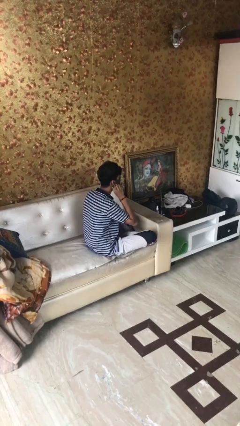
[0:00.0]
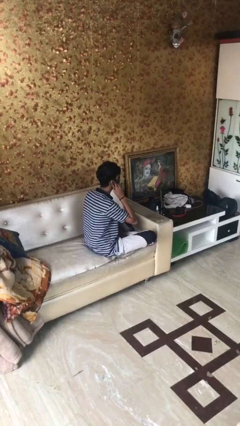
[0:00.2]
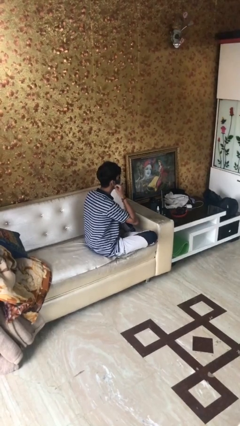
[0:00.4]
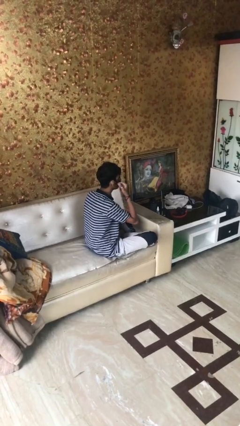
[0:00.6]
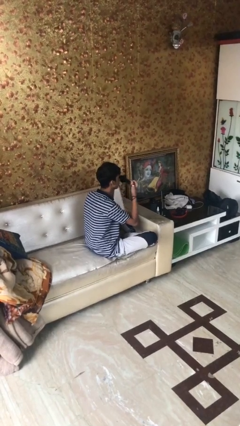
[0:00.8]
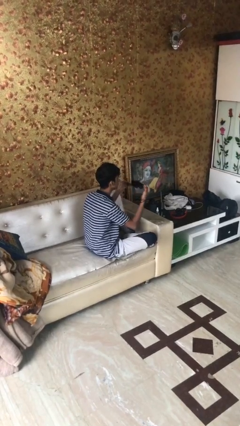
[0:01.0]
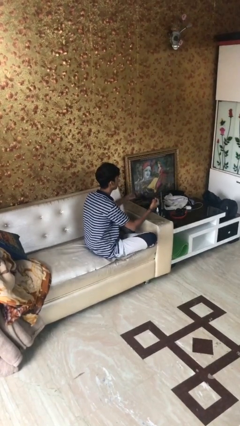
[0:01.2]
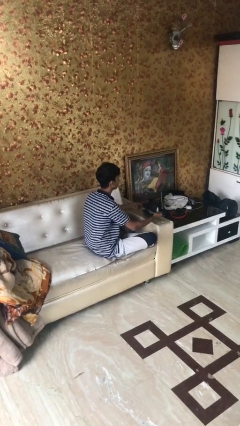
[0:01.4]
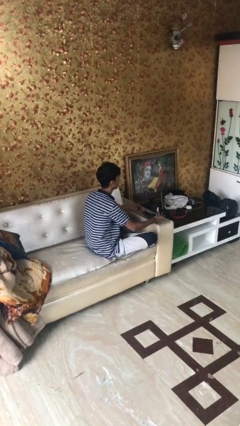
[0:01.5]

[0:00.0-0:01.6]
person takes off facemask

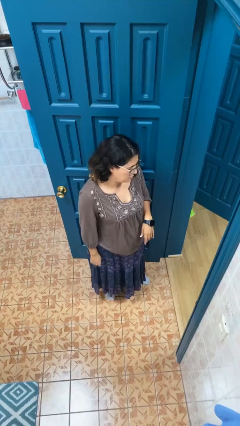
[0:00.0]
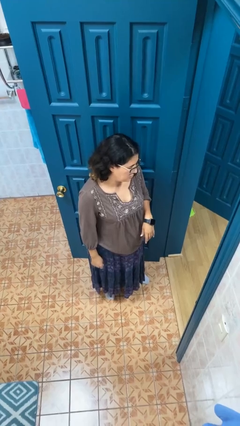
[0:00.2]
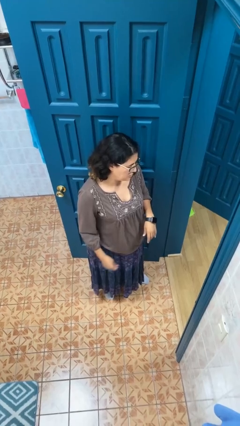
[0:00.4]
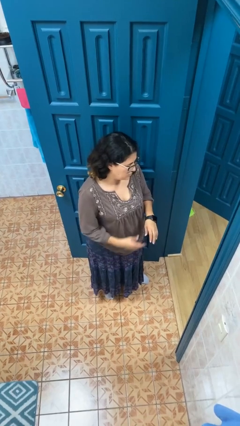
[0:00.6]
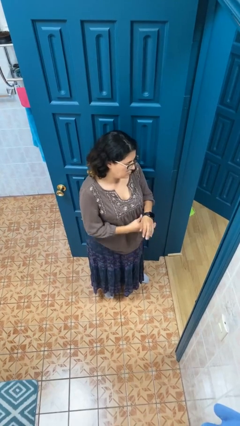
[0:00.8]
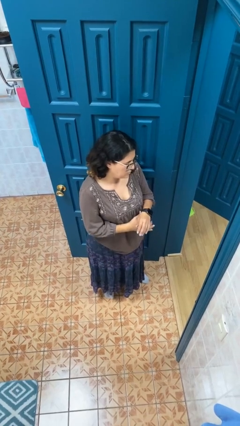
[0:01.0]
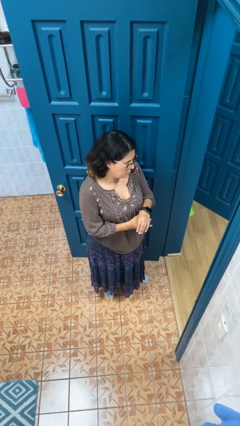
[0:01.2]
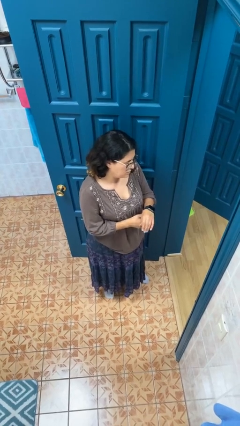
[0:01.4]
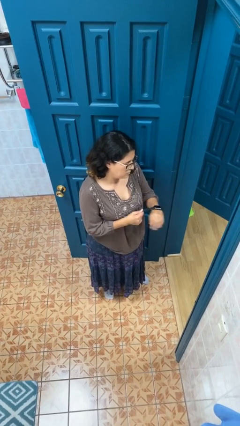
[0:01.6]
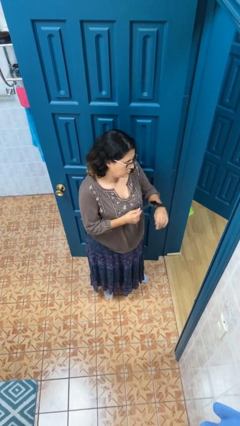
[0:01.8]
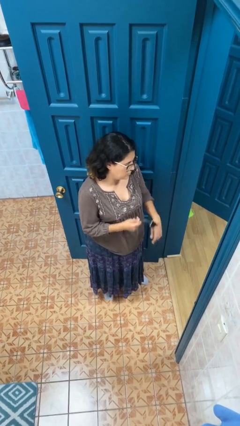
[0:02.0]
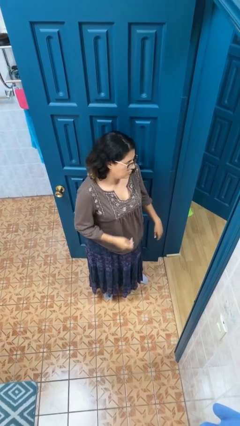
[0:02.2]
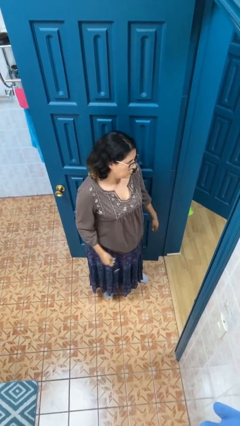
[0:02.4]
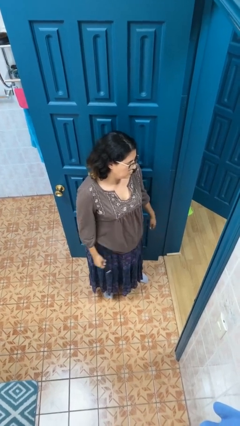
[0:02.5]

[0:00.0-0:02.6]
person takes off wristwatch

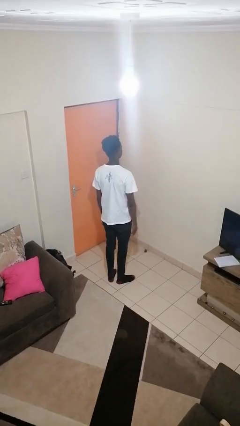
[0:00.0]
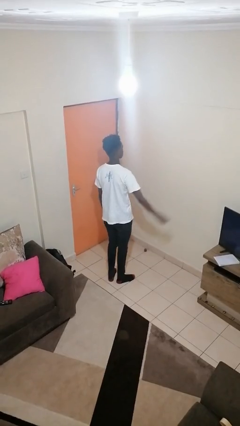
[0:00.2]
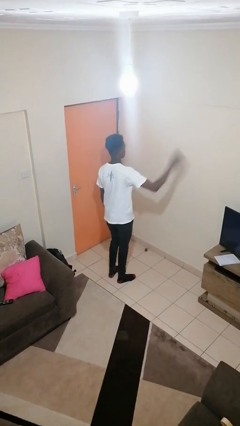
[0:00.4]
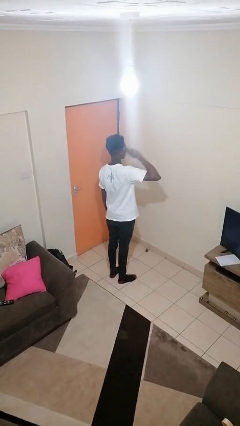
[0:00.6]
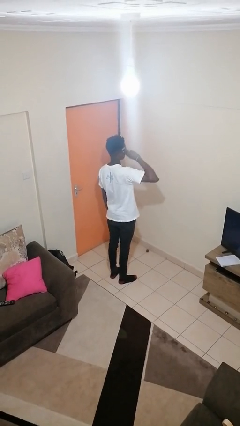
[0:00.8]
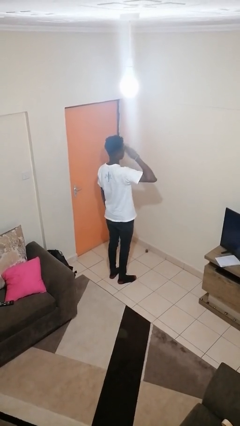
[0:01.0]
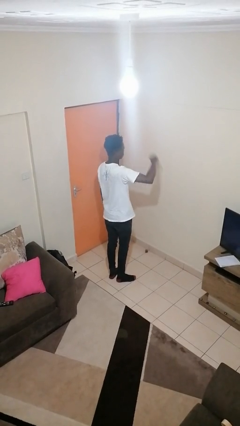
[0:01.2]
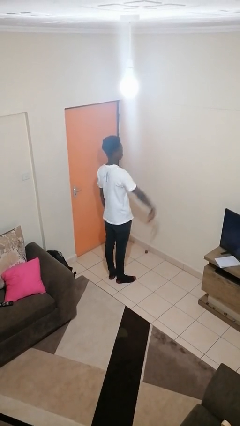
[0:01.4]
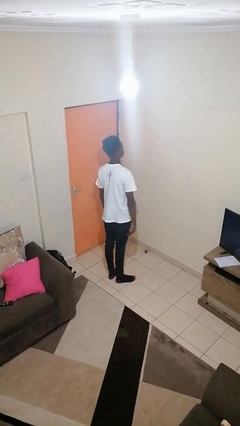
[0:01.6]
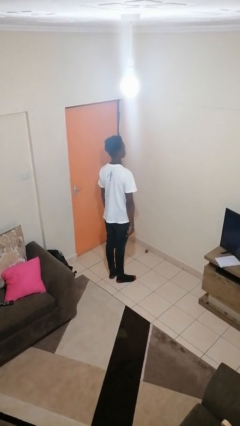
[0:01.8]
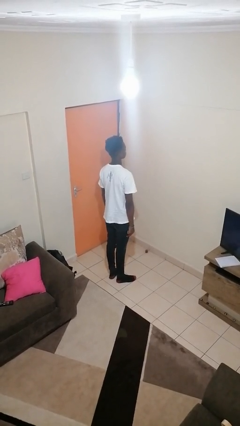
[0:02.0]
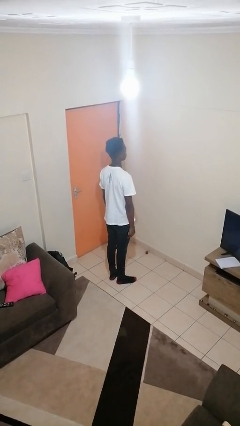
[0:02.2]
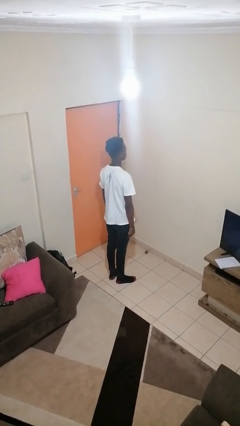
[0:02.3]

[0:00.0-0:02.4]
person salutes

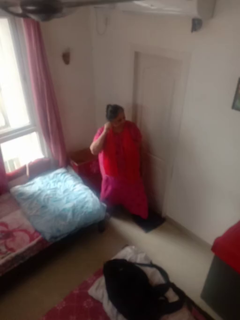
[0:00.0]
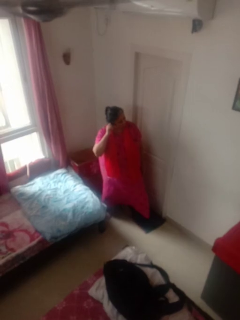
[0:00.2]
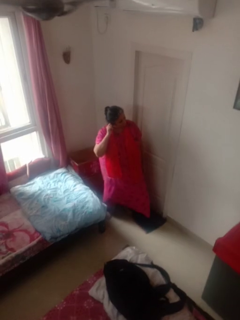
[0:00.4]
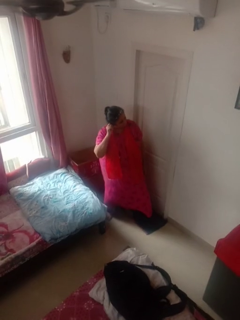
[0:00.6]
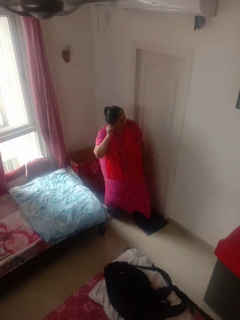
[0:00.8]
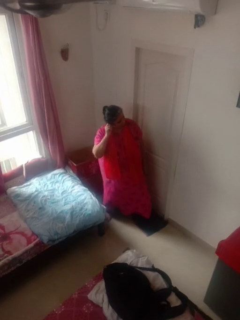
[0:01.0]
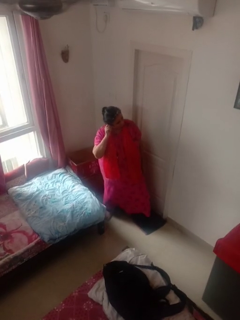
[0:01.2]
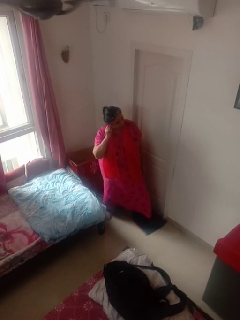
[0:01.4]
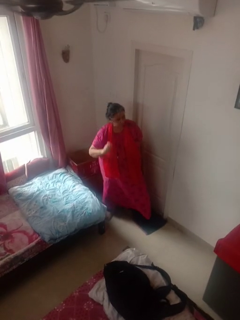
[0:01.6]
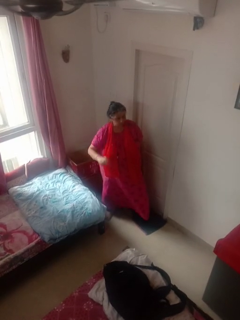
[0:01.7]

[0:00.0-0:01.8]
person touches earlobe

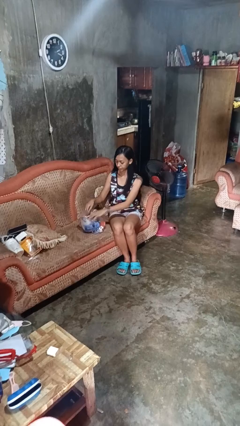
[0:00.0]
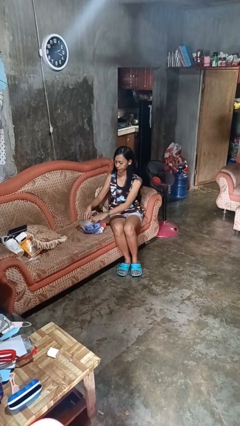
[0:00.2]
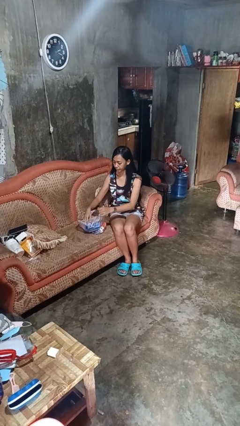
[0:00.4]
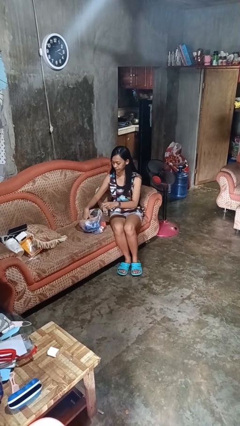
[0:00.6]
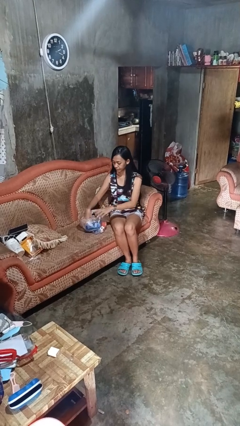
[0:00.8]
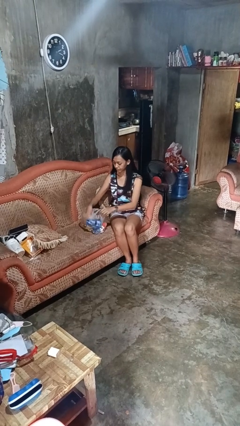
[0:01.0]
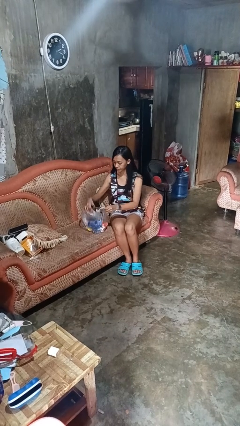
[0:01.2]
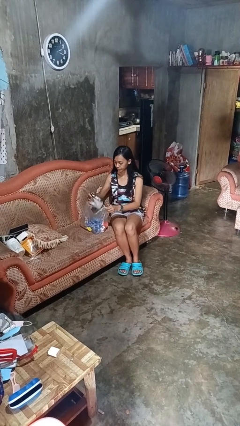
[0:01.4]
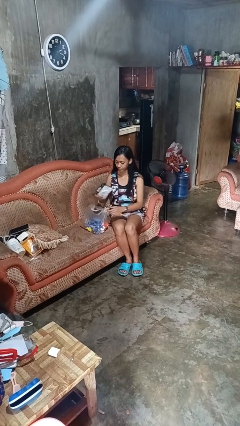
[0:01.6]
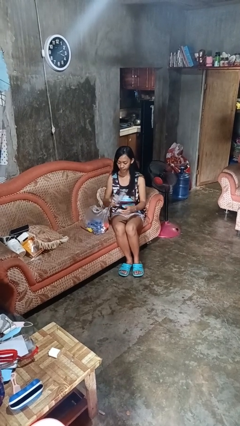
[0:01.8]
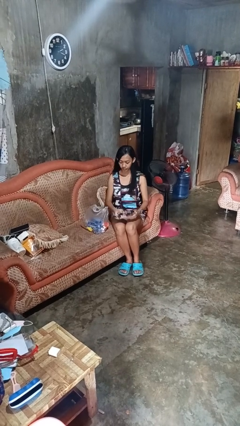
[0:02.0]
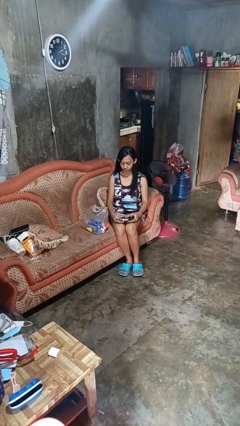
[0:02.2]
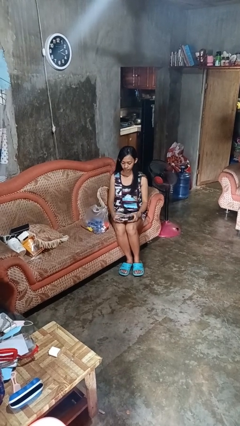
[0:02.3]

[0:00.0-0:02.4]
person takes object from bag

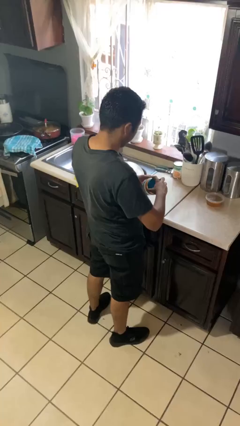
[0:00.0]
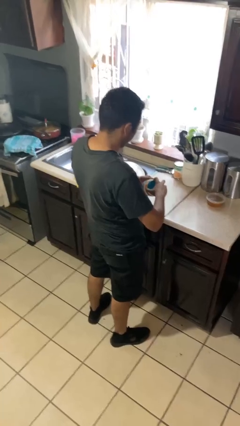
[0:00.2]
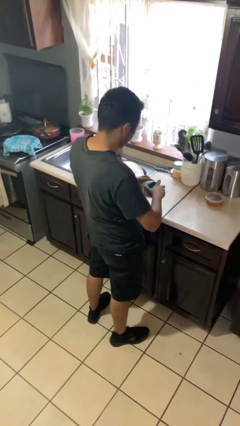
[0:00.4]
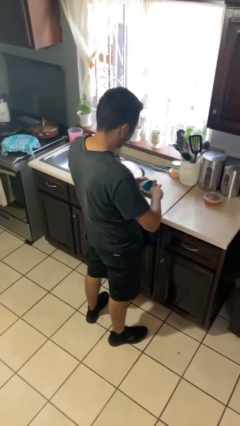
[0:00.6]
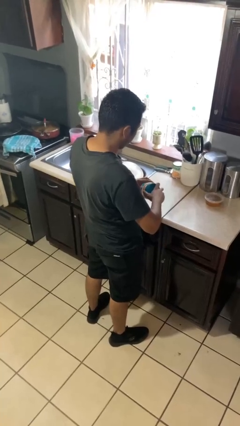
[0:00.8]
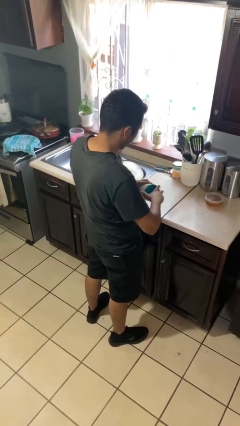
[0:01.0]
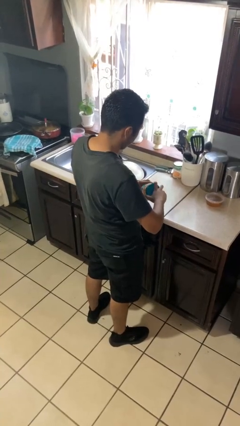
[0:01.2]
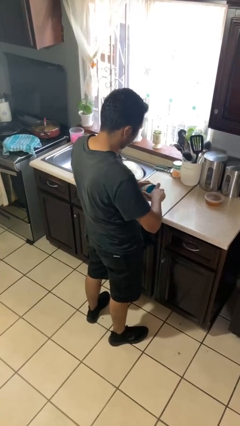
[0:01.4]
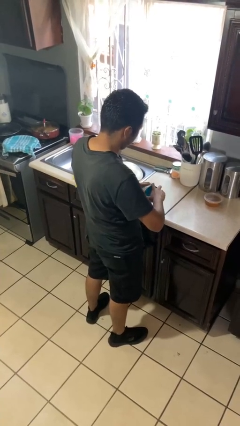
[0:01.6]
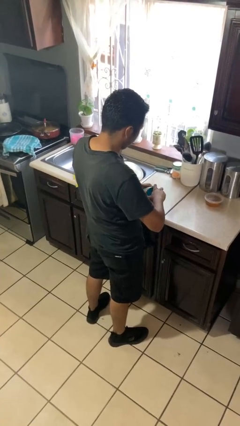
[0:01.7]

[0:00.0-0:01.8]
person closes jar

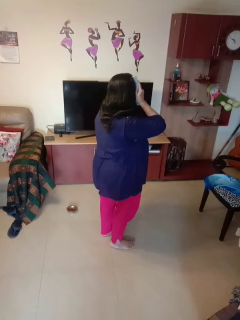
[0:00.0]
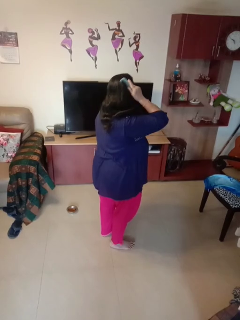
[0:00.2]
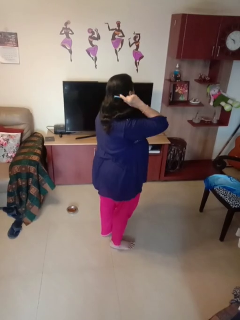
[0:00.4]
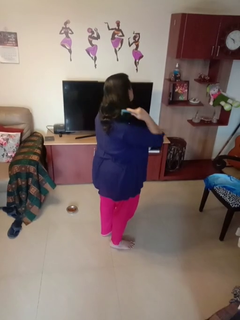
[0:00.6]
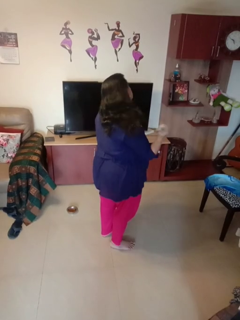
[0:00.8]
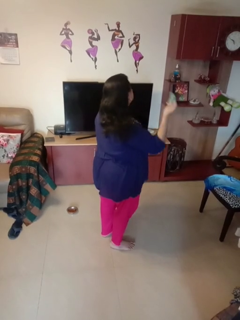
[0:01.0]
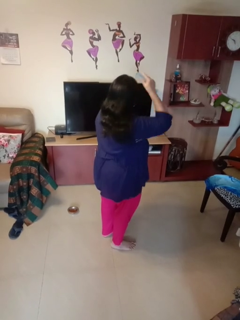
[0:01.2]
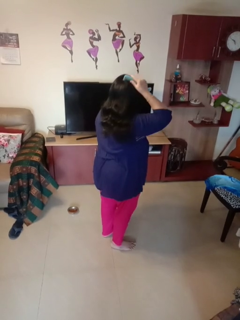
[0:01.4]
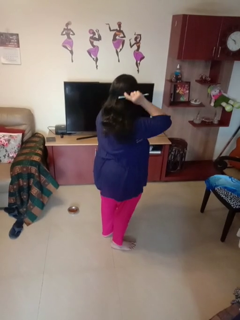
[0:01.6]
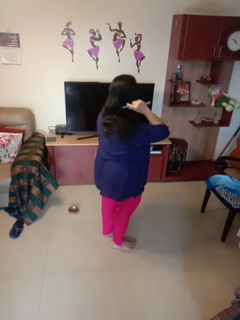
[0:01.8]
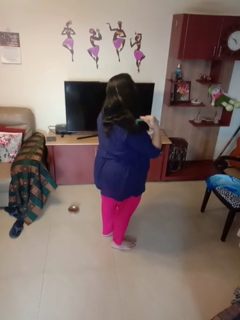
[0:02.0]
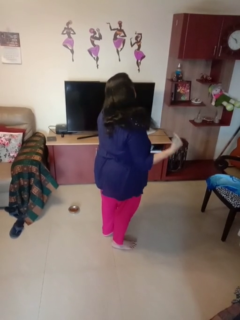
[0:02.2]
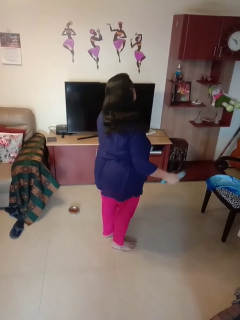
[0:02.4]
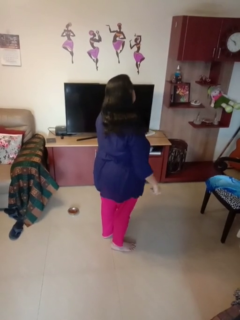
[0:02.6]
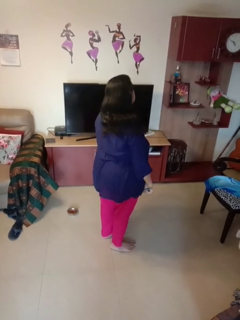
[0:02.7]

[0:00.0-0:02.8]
person brushes hair

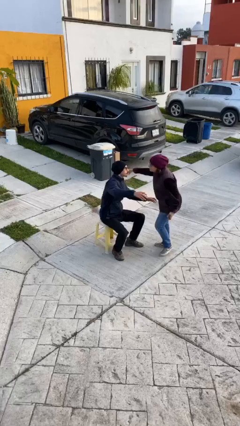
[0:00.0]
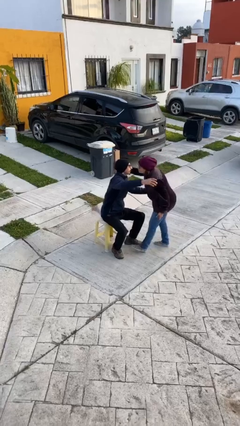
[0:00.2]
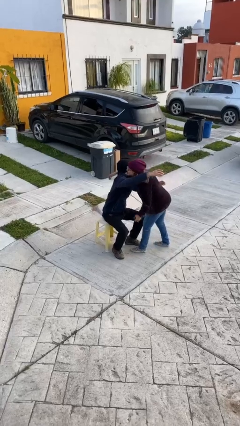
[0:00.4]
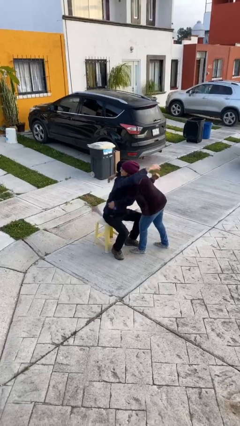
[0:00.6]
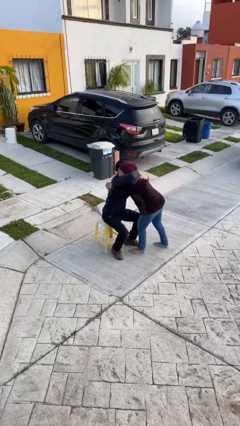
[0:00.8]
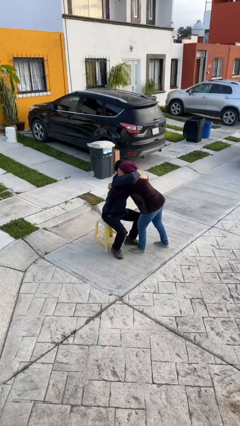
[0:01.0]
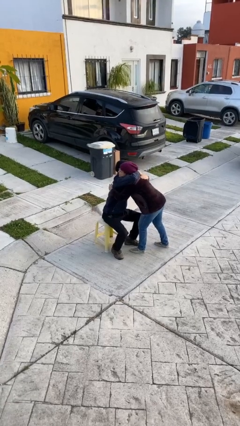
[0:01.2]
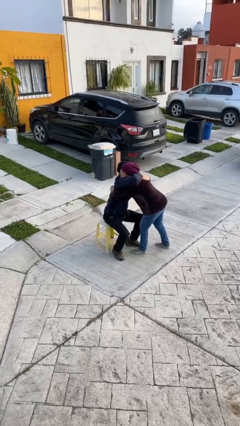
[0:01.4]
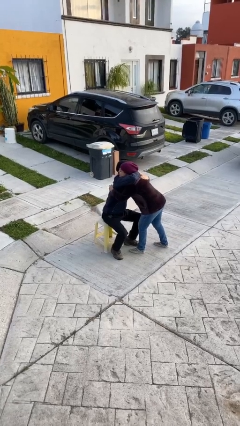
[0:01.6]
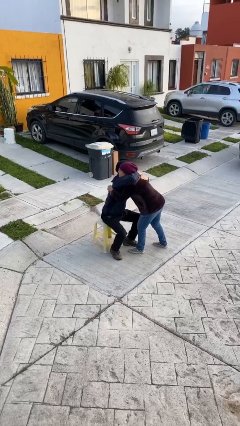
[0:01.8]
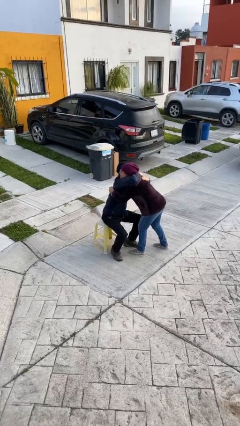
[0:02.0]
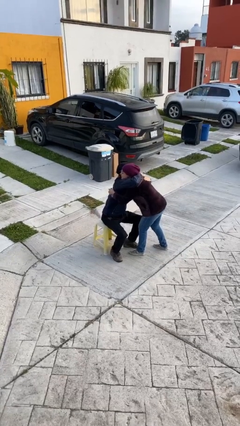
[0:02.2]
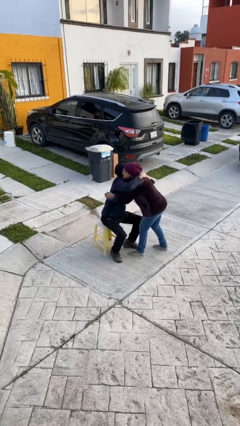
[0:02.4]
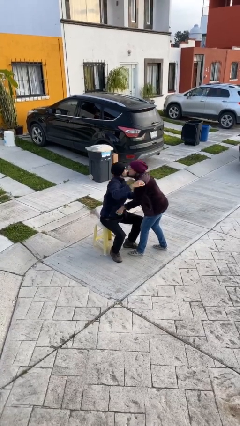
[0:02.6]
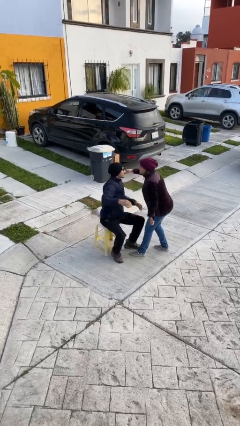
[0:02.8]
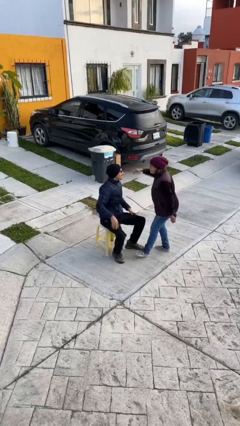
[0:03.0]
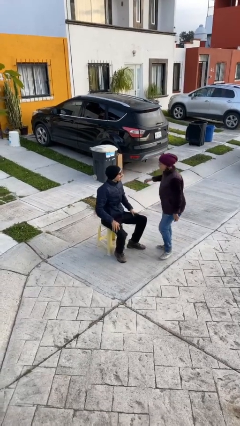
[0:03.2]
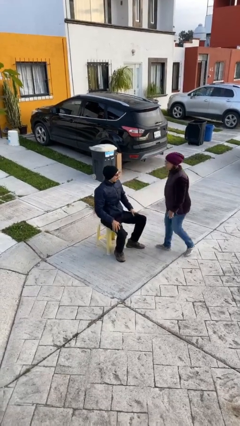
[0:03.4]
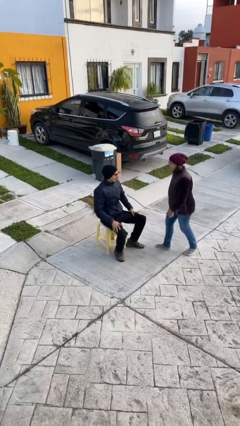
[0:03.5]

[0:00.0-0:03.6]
person embraces person
